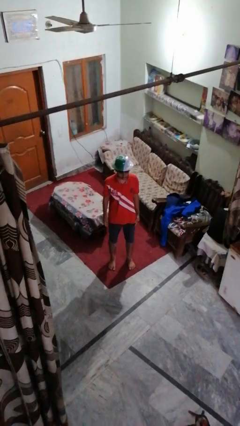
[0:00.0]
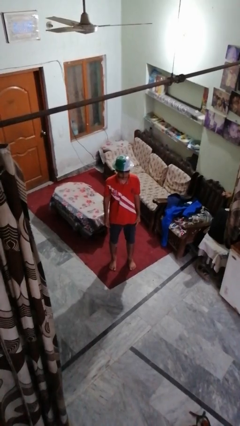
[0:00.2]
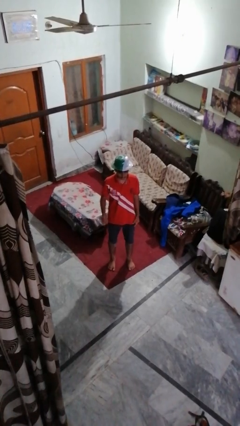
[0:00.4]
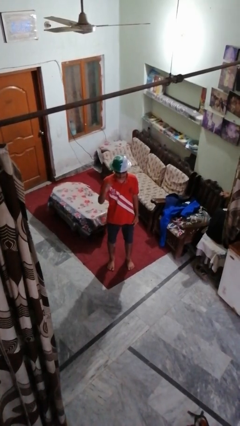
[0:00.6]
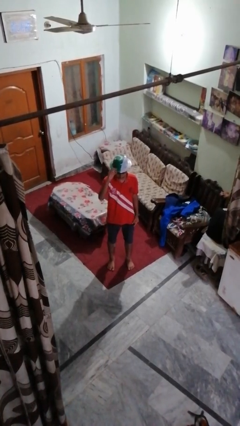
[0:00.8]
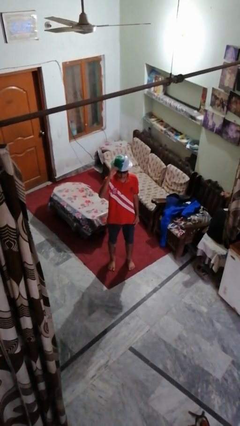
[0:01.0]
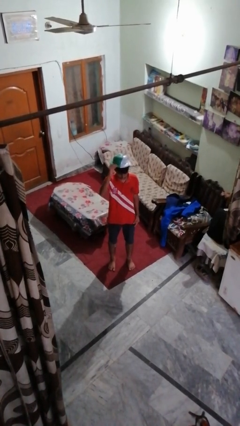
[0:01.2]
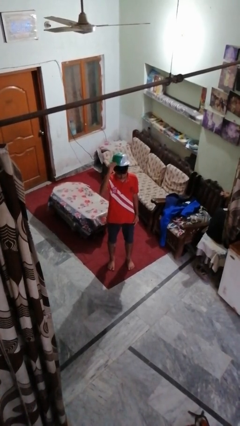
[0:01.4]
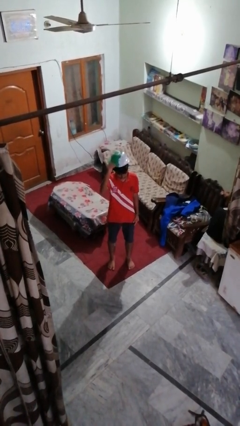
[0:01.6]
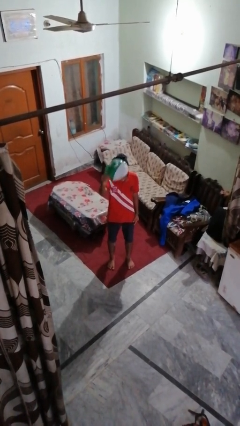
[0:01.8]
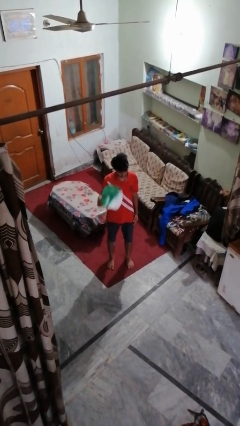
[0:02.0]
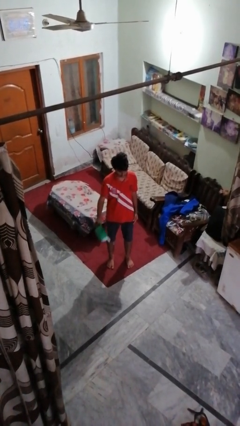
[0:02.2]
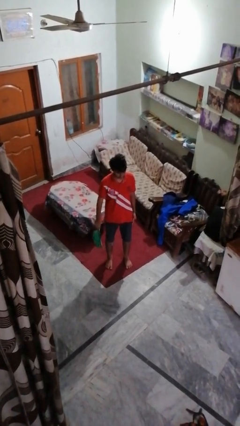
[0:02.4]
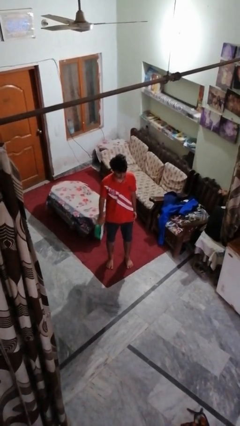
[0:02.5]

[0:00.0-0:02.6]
person takes off hat

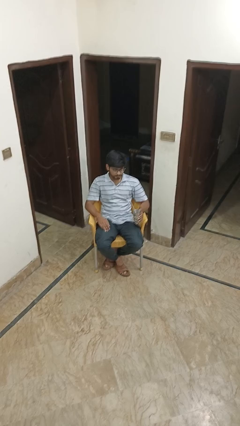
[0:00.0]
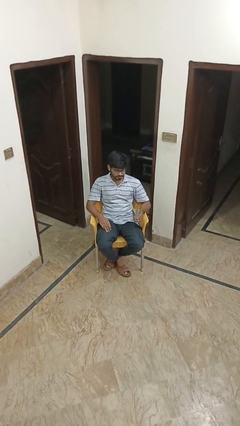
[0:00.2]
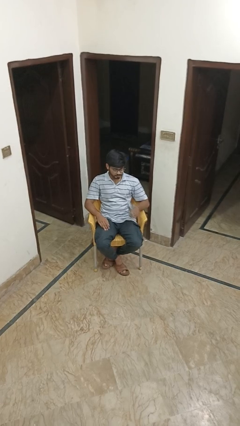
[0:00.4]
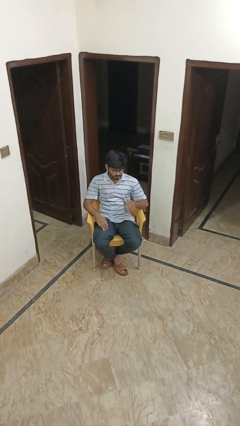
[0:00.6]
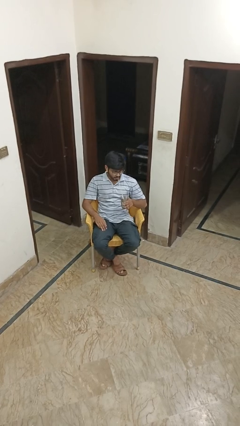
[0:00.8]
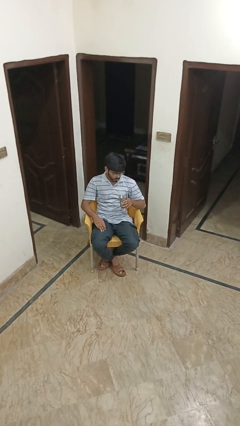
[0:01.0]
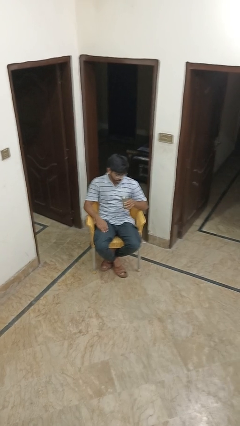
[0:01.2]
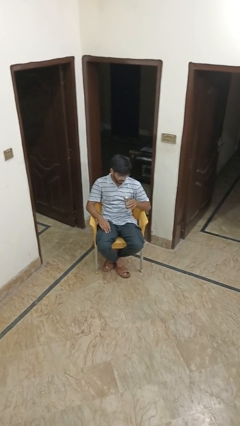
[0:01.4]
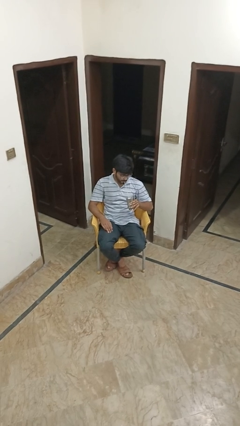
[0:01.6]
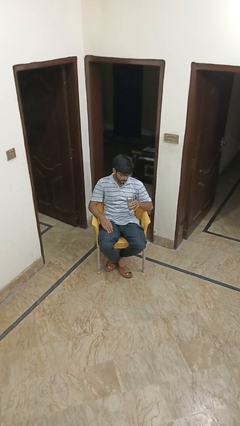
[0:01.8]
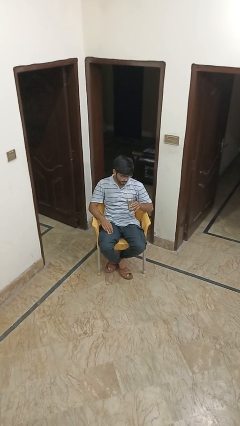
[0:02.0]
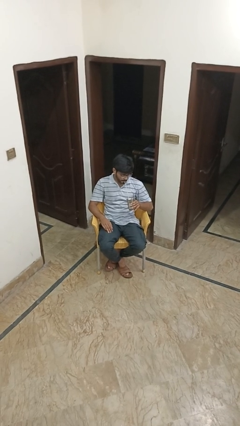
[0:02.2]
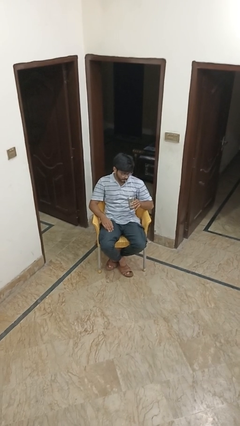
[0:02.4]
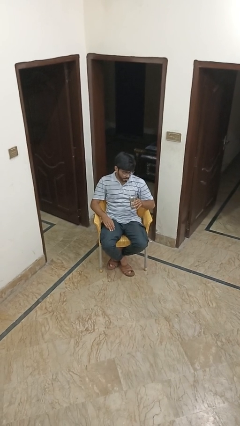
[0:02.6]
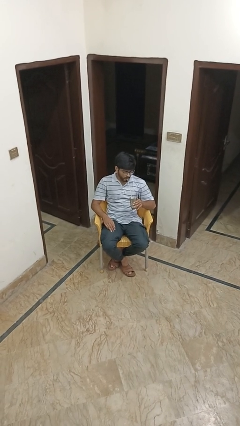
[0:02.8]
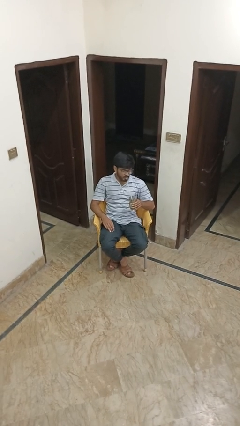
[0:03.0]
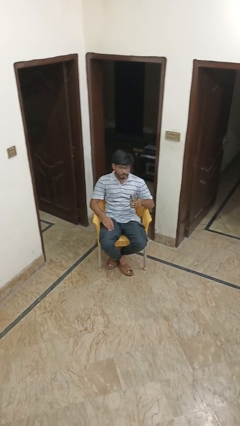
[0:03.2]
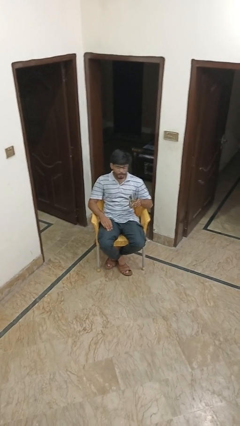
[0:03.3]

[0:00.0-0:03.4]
person drinks from straw

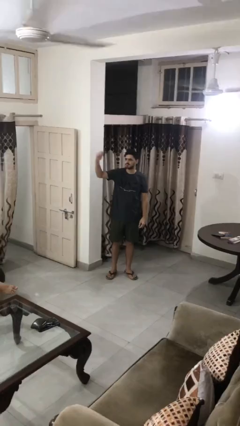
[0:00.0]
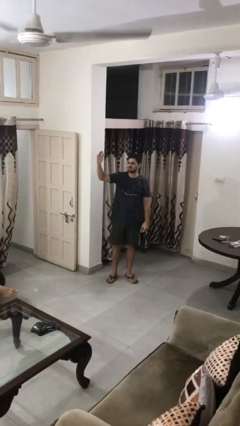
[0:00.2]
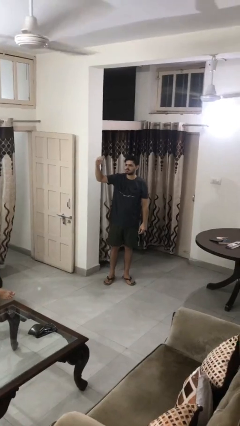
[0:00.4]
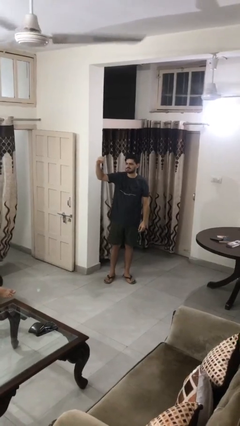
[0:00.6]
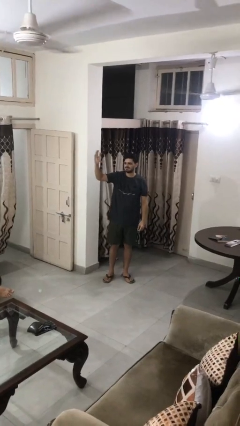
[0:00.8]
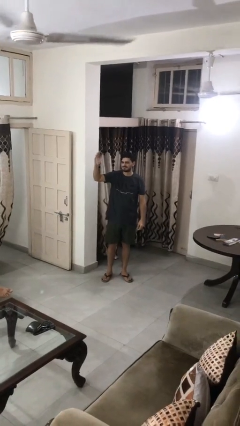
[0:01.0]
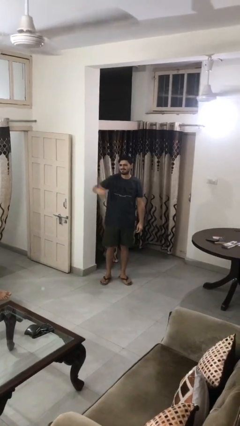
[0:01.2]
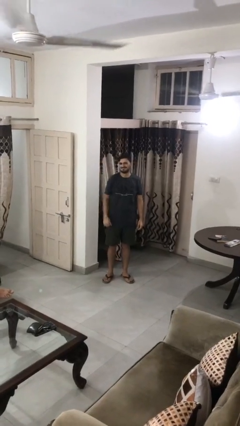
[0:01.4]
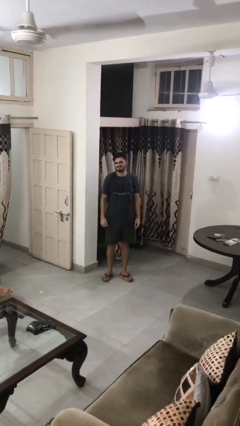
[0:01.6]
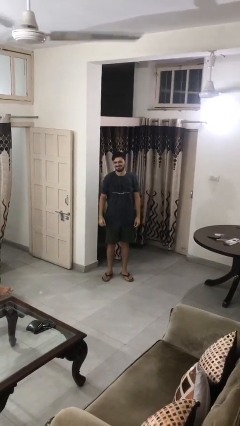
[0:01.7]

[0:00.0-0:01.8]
person gestures come here

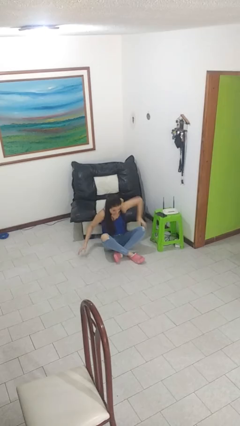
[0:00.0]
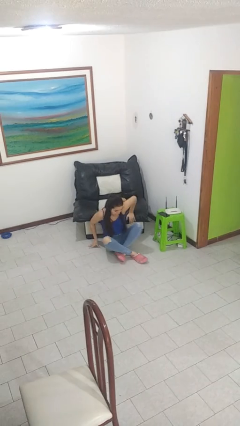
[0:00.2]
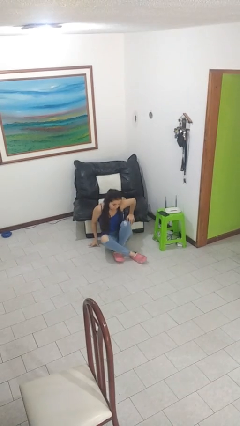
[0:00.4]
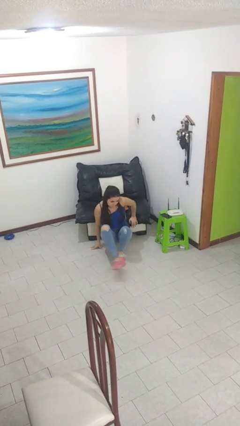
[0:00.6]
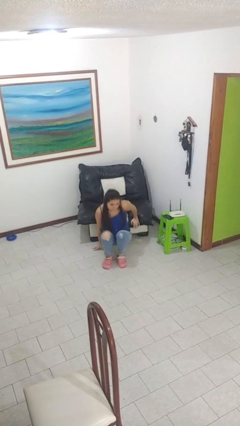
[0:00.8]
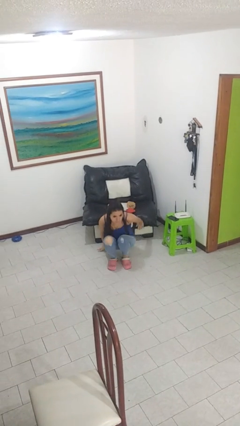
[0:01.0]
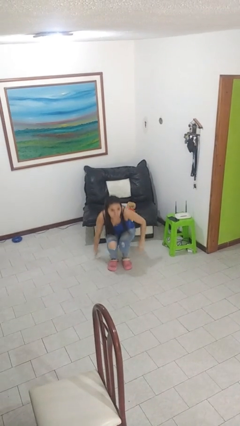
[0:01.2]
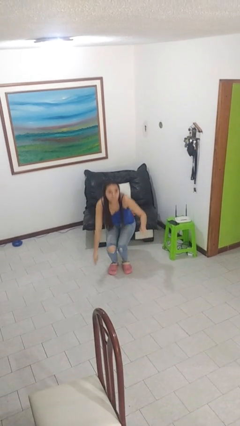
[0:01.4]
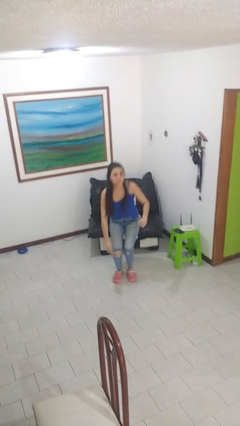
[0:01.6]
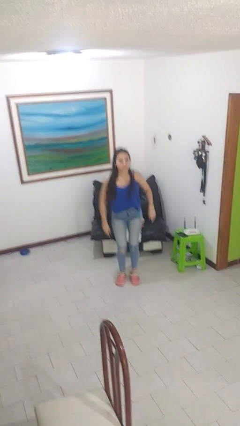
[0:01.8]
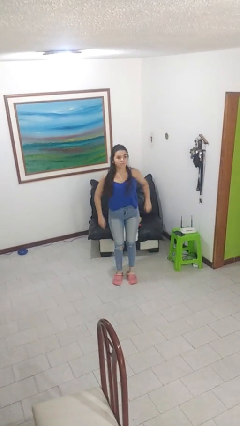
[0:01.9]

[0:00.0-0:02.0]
person stands up from floor

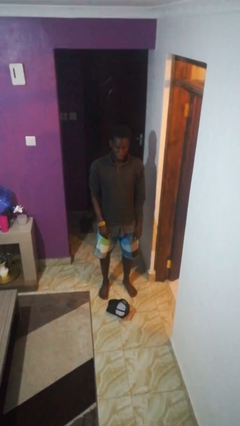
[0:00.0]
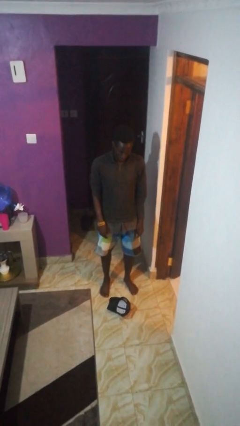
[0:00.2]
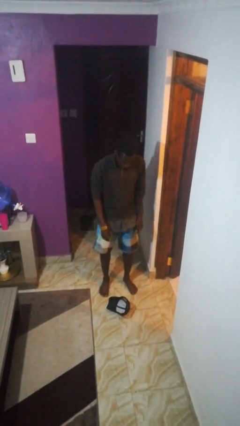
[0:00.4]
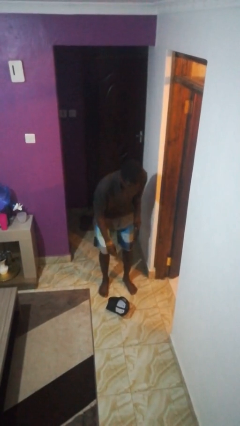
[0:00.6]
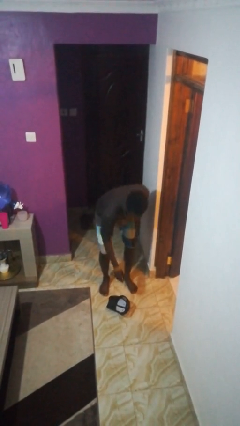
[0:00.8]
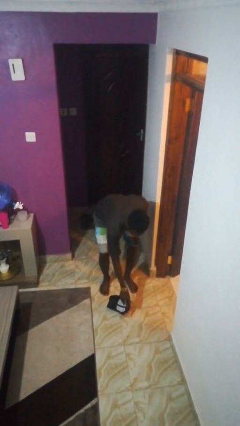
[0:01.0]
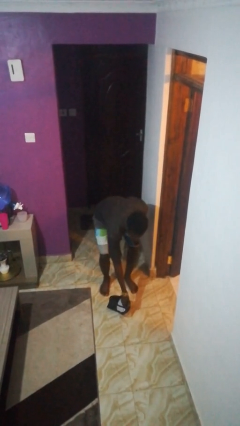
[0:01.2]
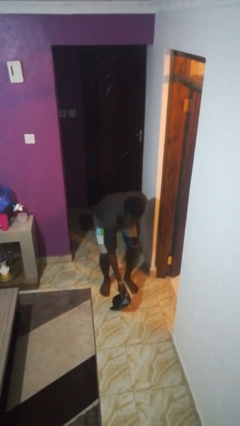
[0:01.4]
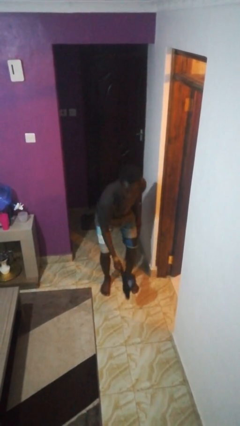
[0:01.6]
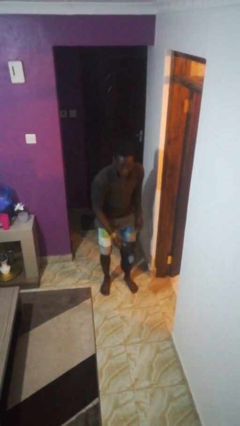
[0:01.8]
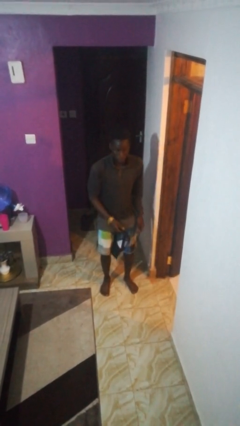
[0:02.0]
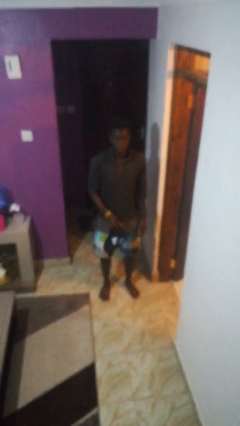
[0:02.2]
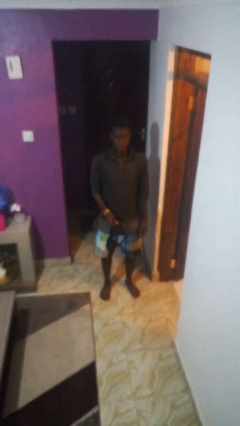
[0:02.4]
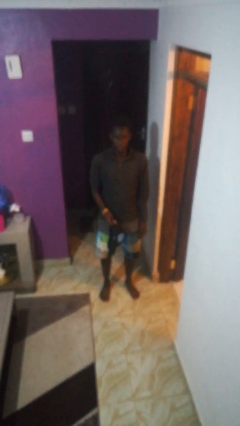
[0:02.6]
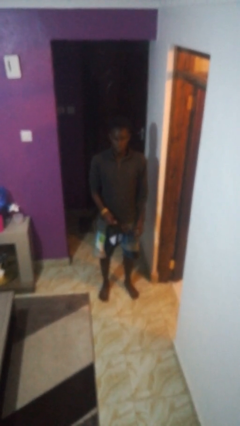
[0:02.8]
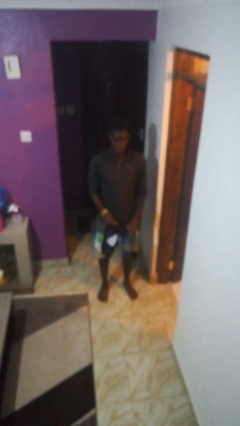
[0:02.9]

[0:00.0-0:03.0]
person picks up object from floor

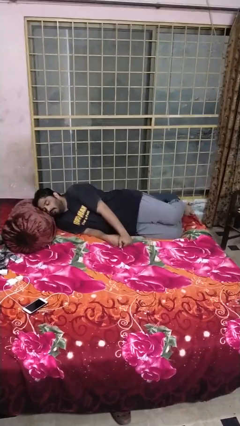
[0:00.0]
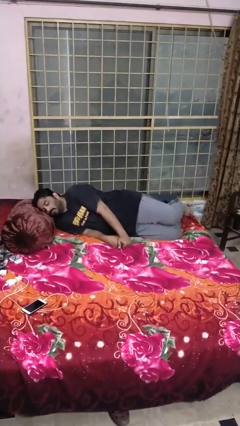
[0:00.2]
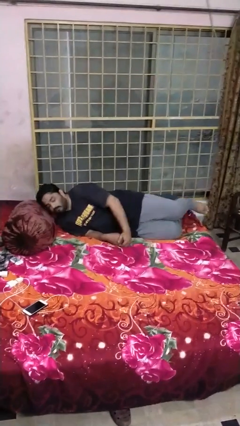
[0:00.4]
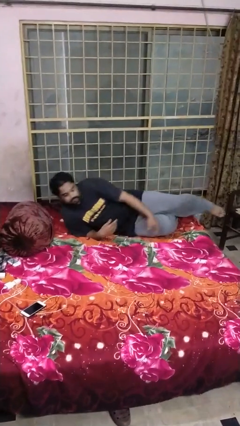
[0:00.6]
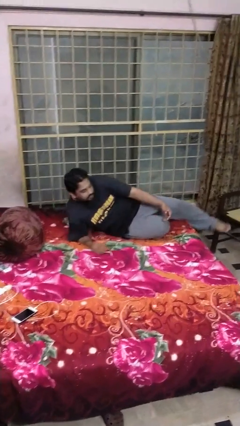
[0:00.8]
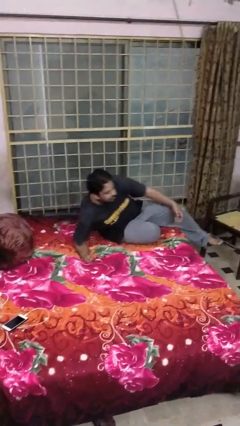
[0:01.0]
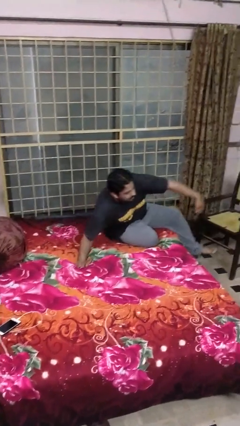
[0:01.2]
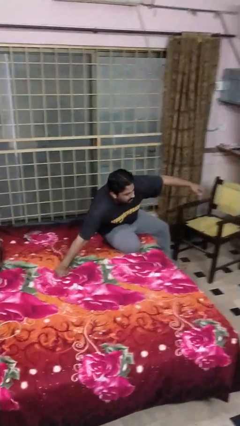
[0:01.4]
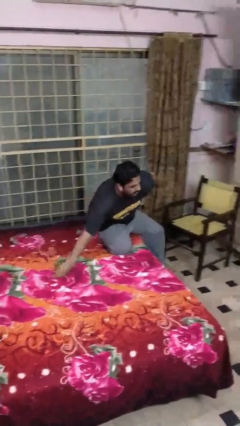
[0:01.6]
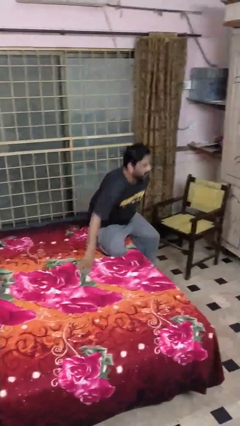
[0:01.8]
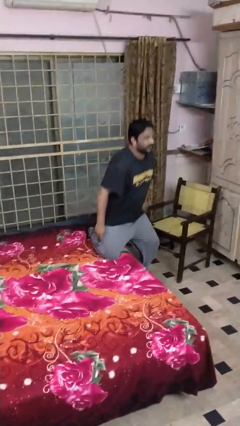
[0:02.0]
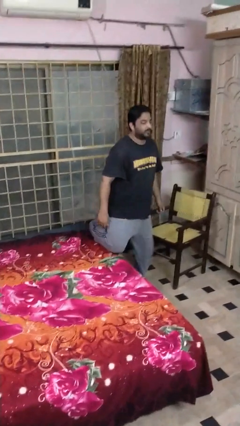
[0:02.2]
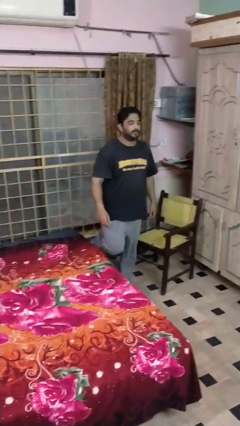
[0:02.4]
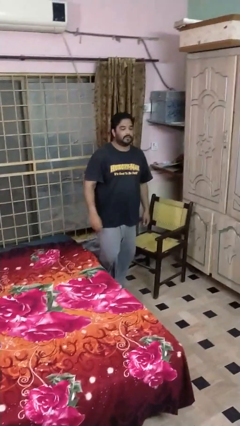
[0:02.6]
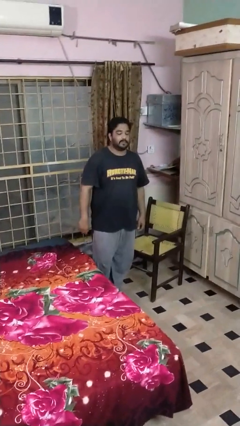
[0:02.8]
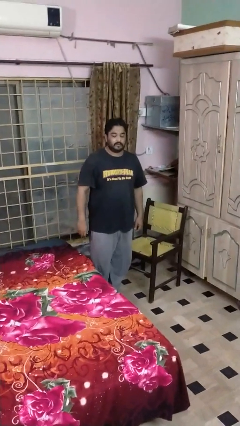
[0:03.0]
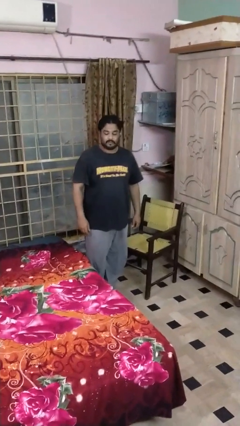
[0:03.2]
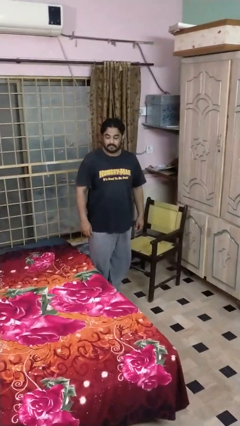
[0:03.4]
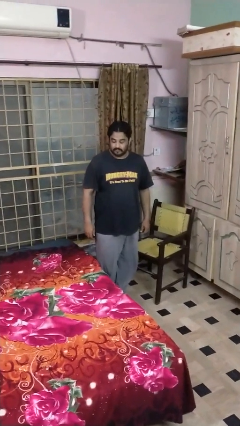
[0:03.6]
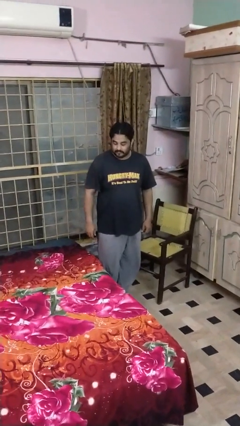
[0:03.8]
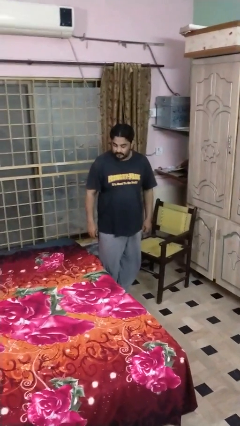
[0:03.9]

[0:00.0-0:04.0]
person stands up

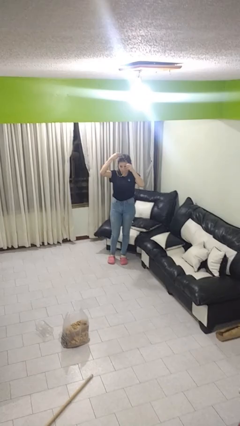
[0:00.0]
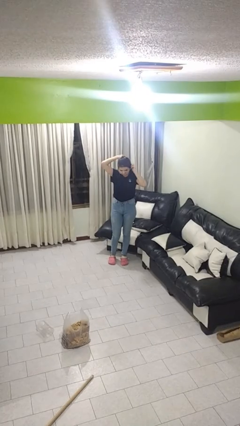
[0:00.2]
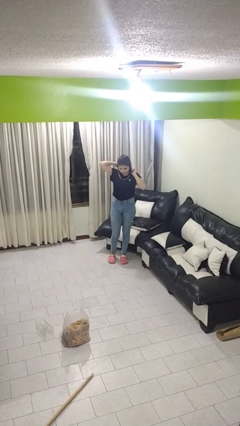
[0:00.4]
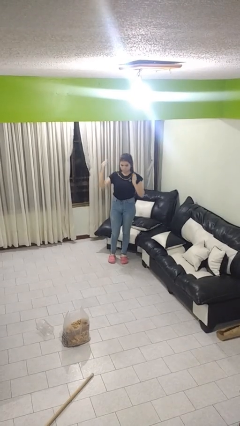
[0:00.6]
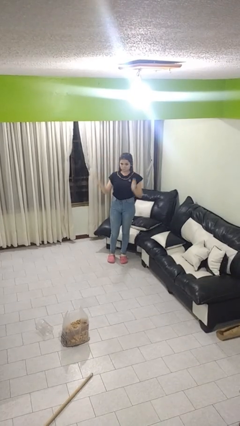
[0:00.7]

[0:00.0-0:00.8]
person puts on necklace
